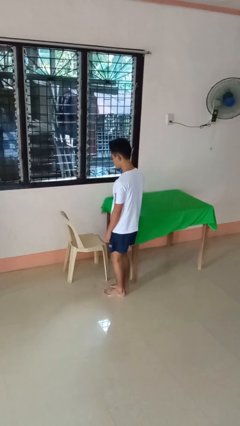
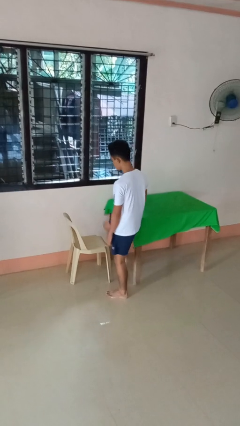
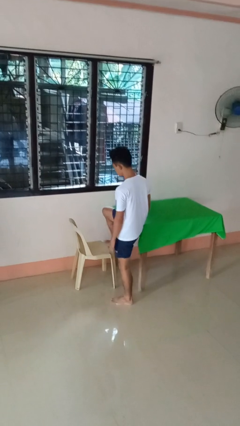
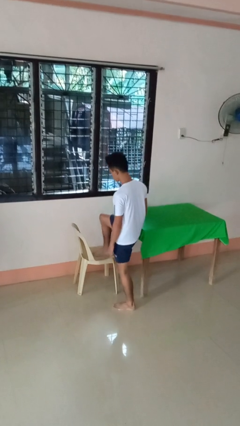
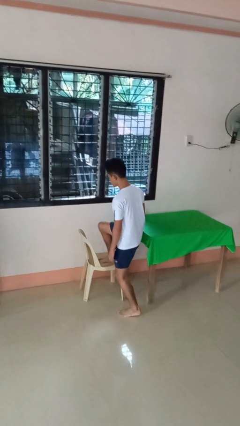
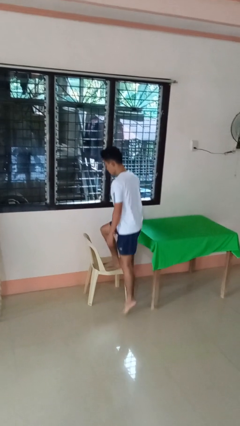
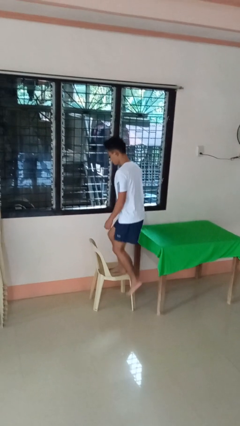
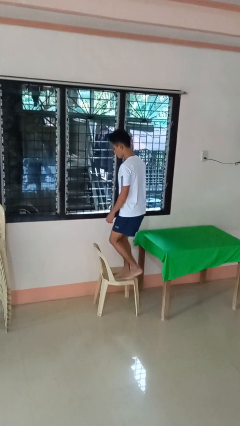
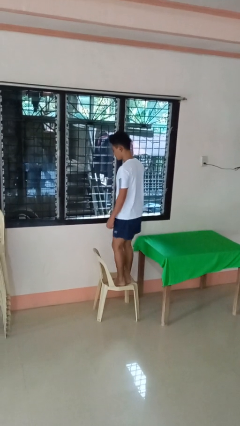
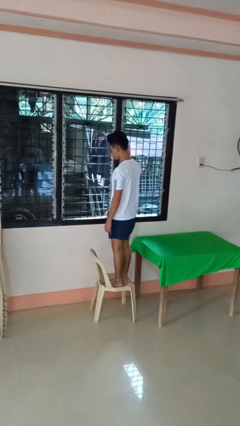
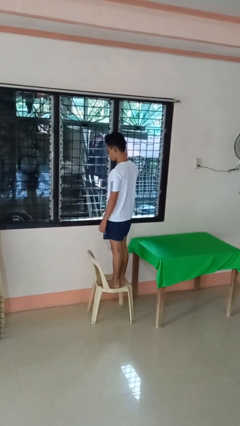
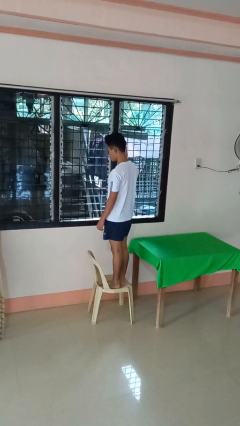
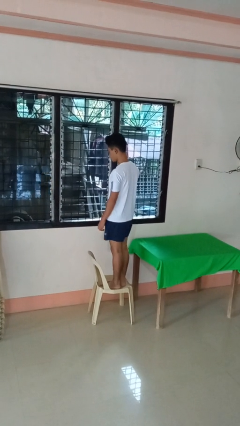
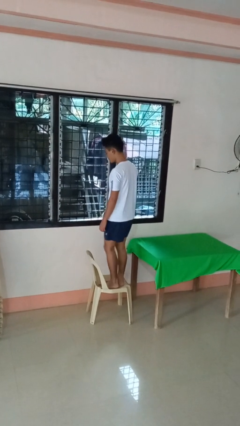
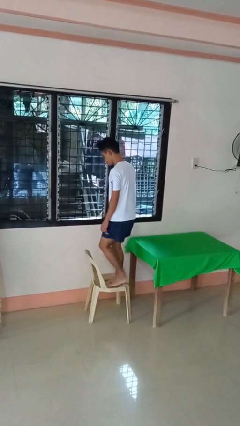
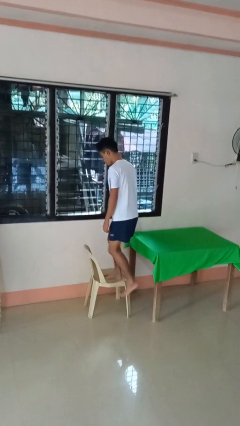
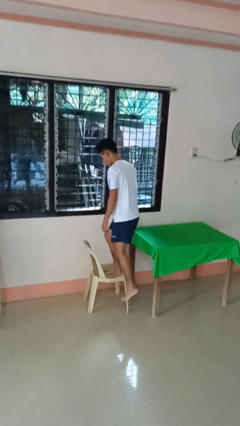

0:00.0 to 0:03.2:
person climbs on chair

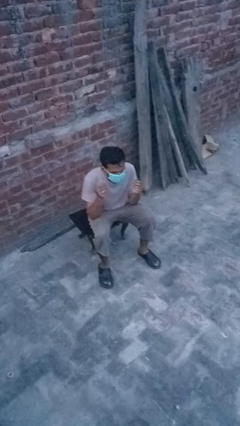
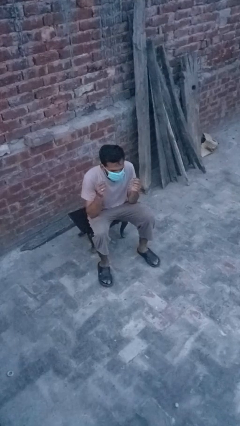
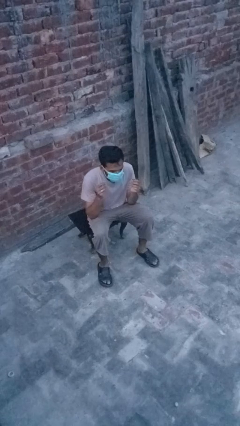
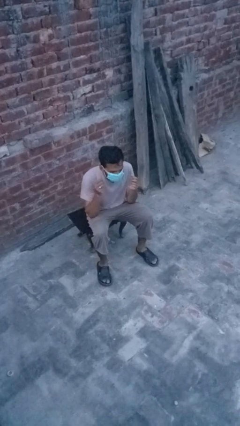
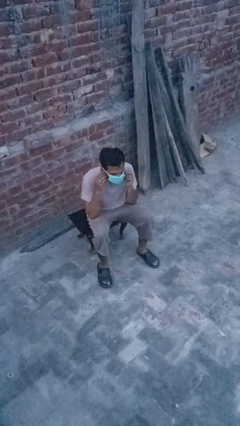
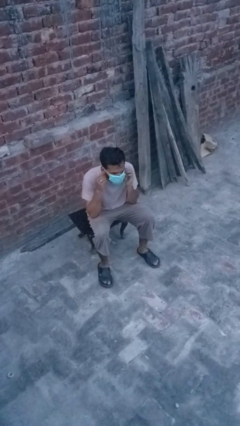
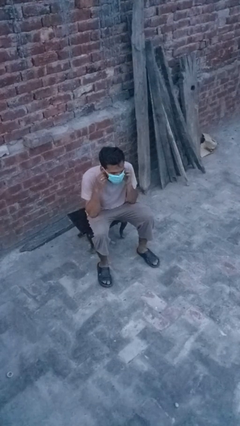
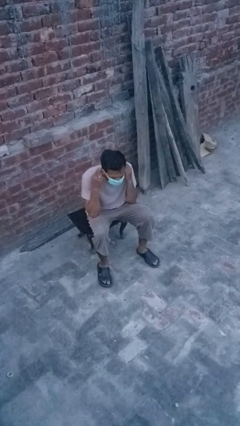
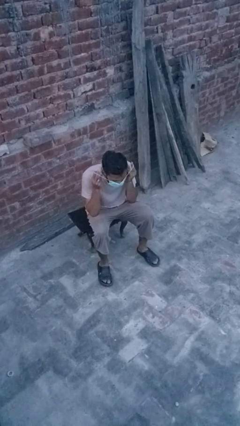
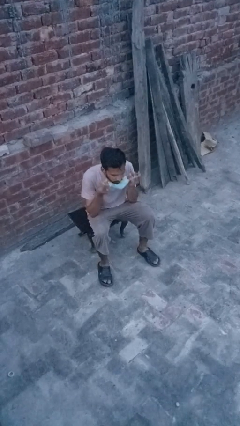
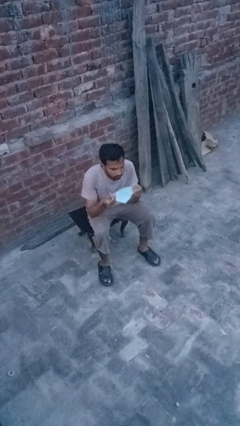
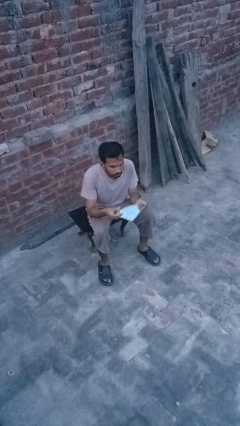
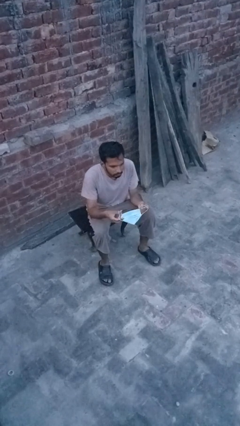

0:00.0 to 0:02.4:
person takes off facemask

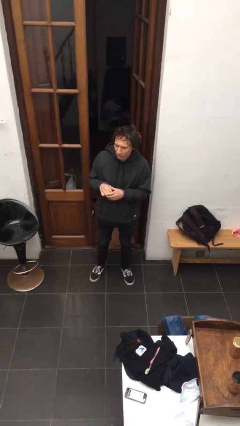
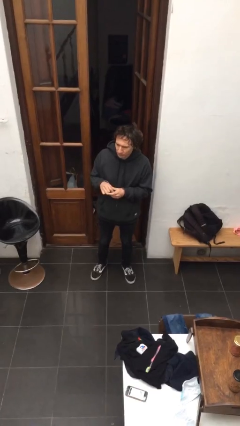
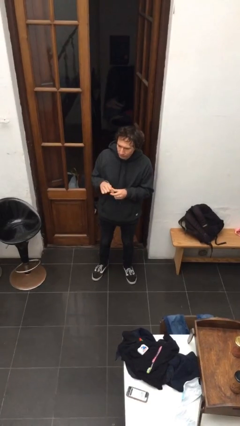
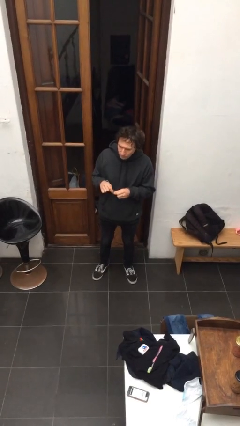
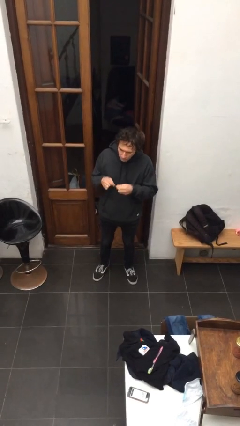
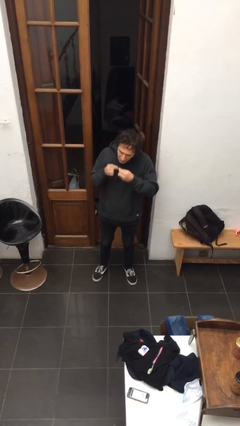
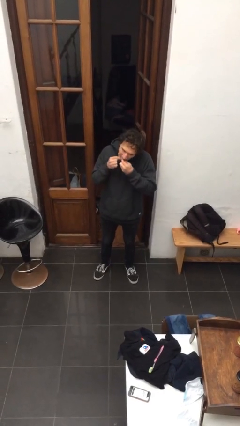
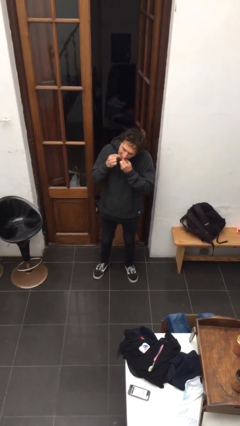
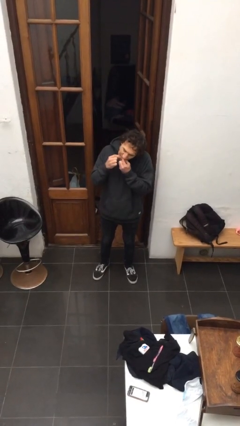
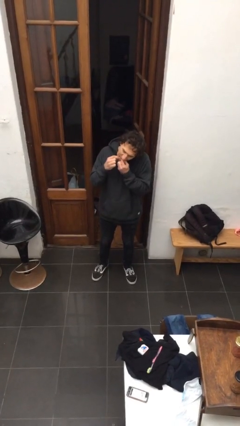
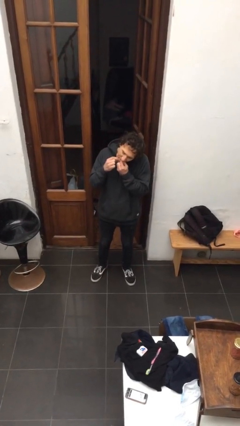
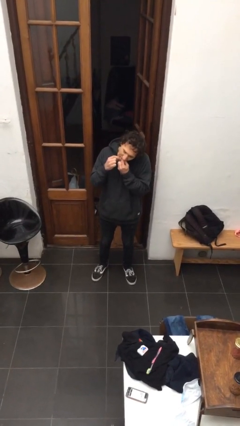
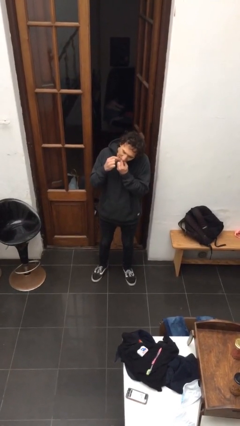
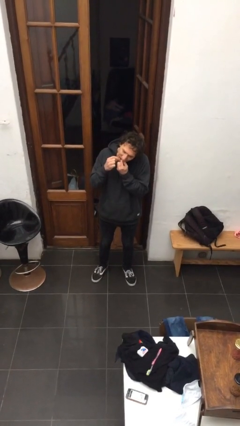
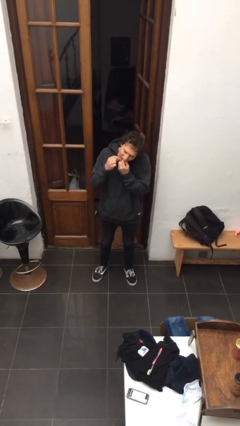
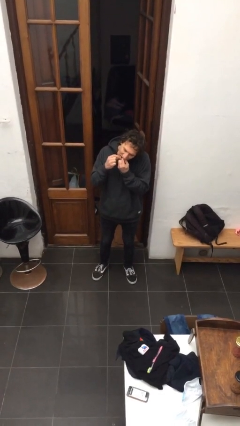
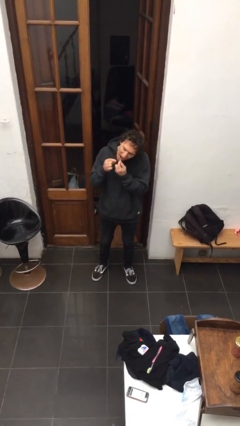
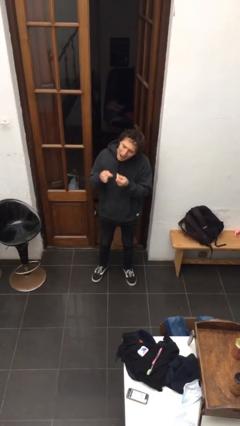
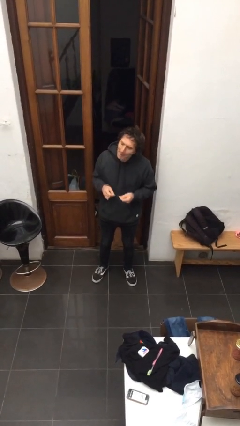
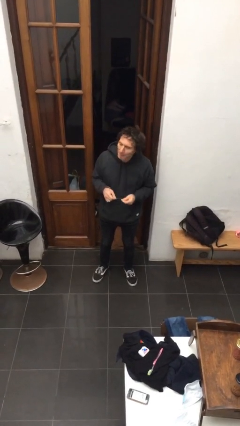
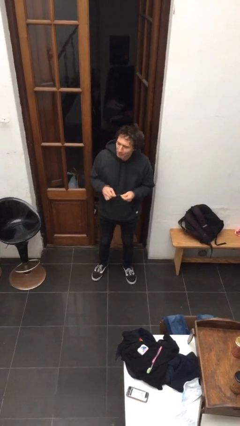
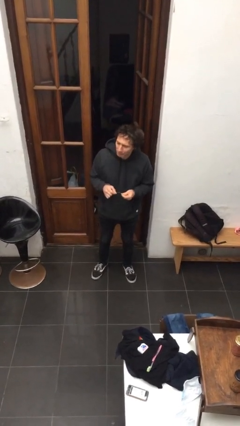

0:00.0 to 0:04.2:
person flosses

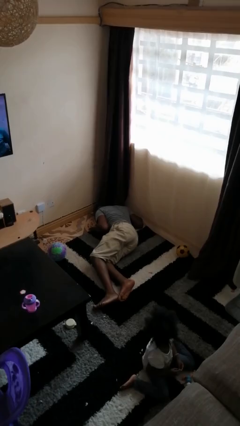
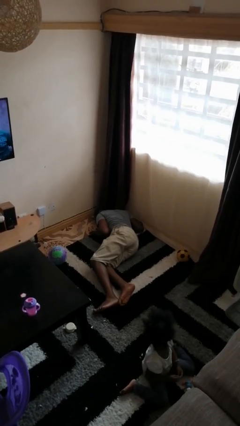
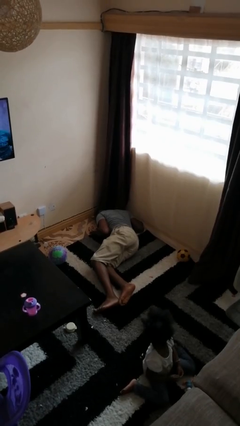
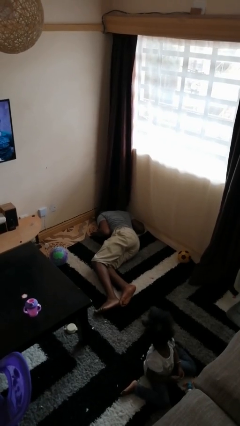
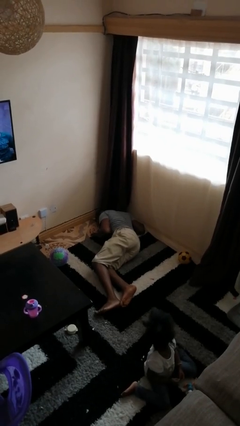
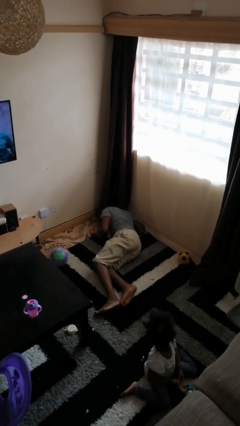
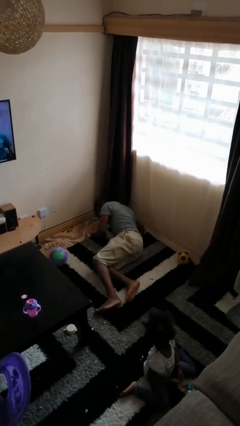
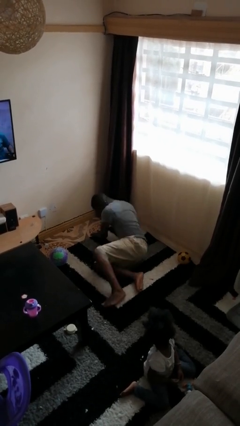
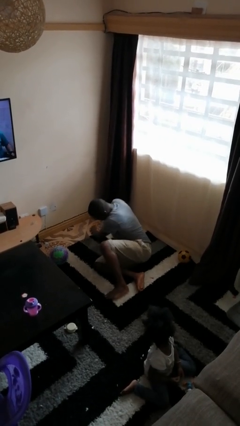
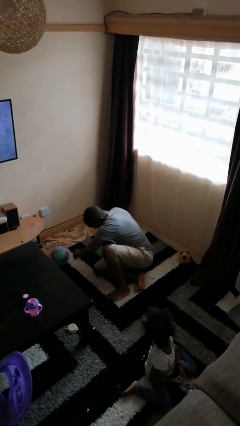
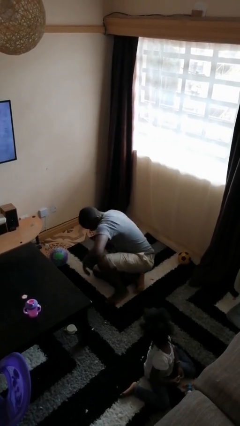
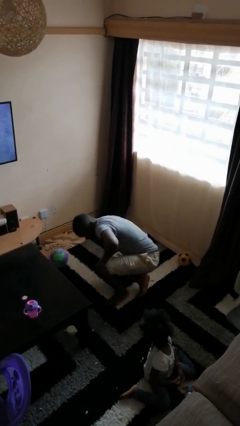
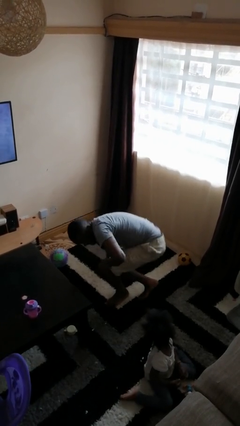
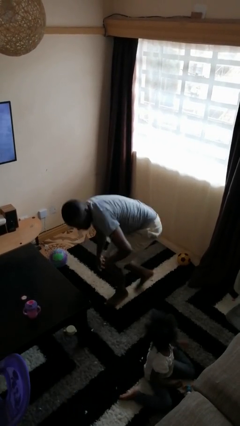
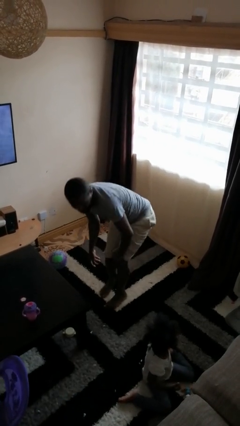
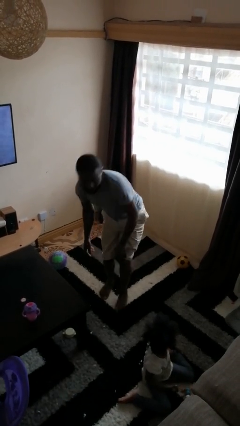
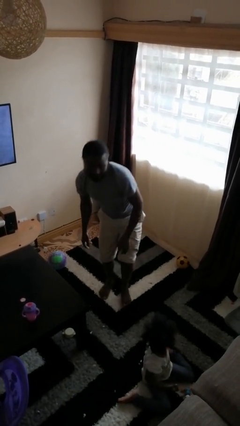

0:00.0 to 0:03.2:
person stands up from floor

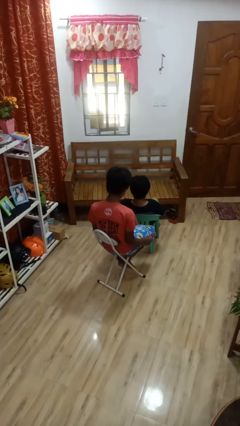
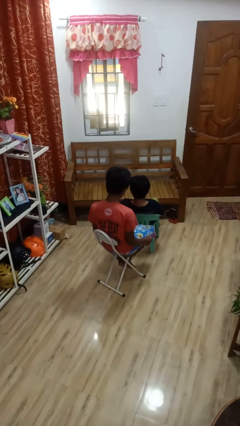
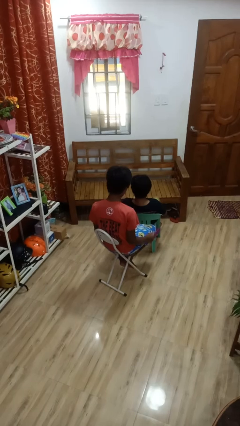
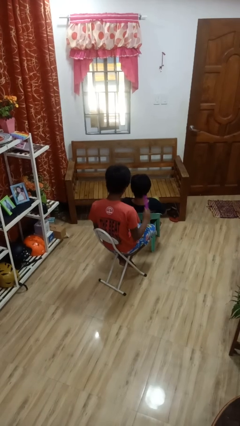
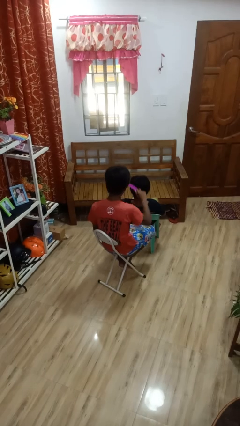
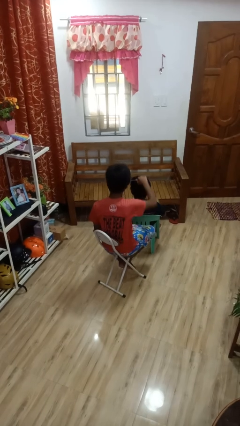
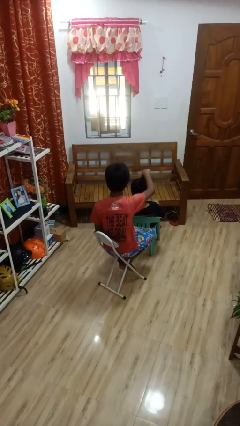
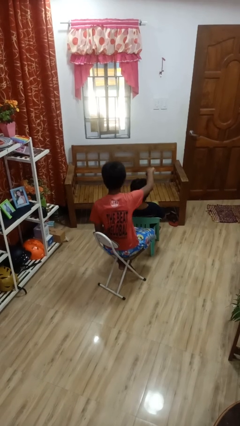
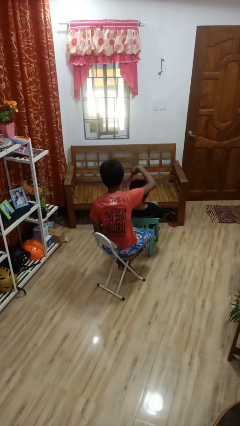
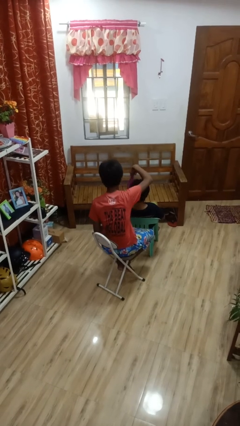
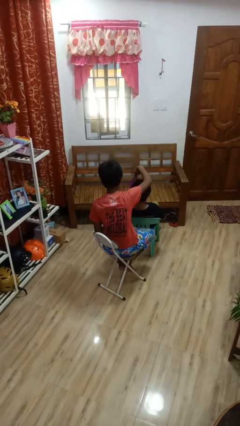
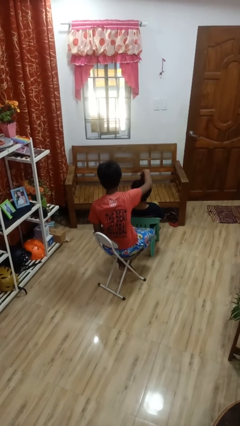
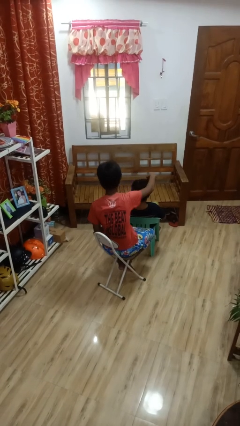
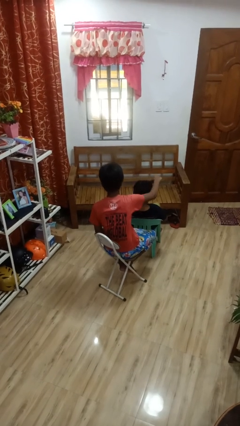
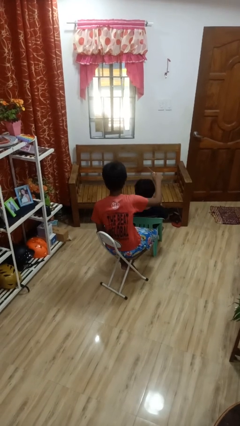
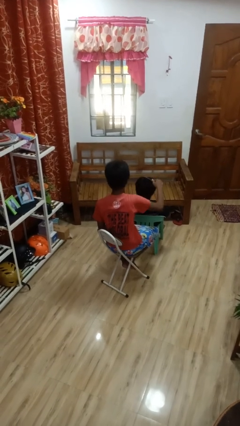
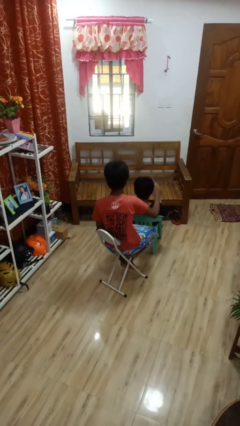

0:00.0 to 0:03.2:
person brushes hair of person

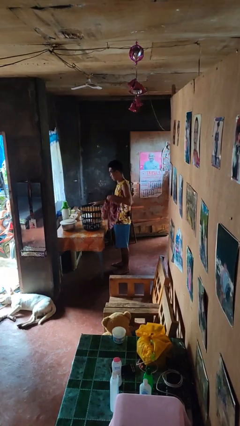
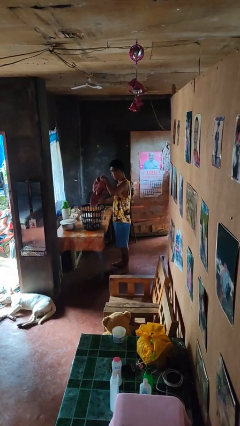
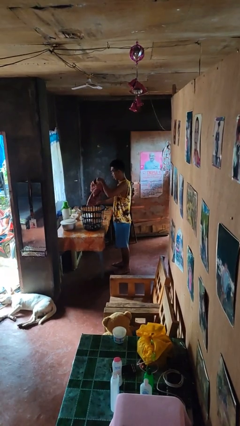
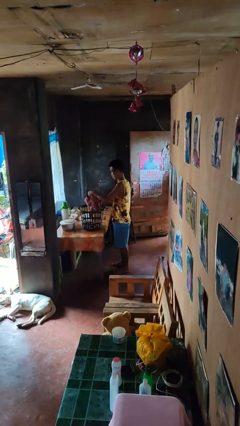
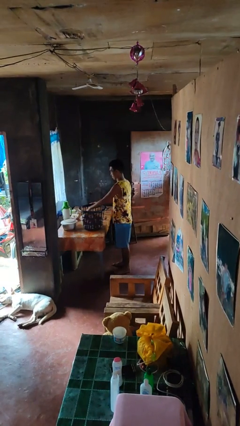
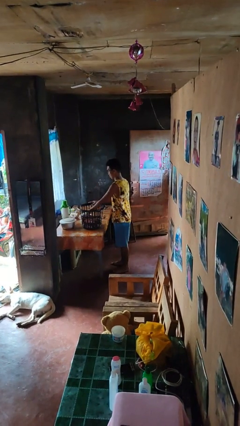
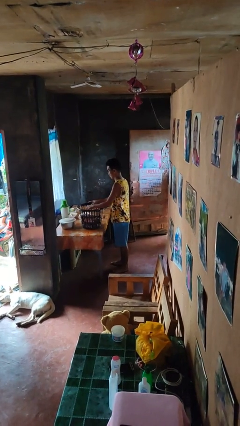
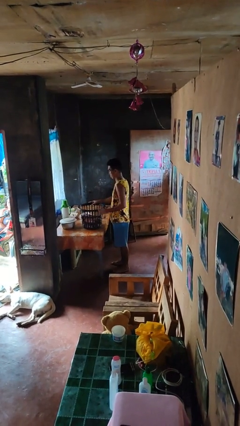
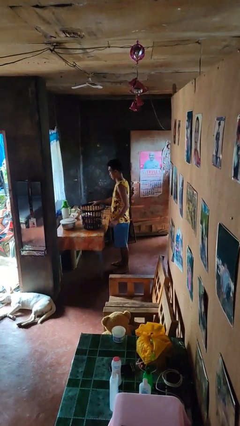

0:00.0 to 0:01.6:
person puts object into basket
